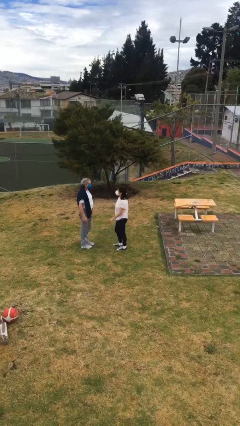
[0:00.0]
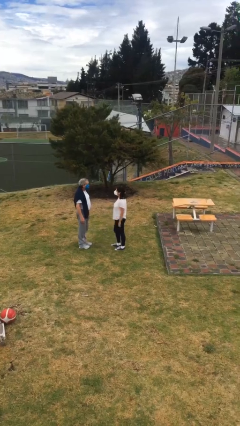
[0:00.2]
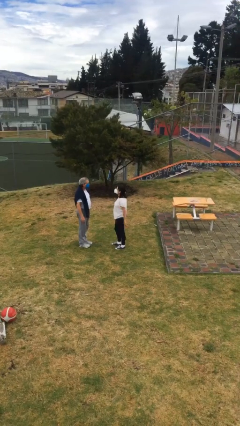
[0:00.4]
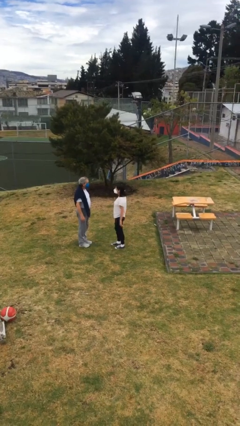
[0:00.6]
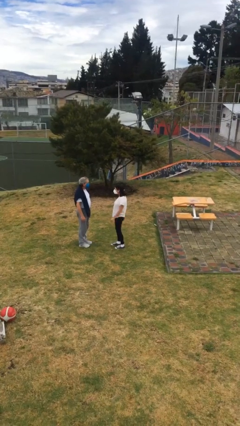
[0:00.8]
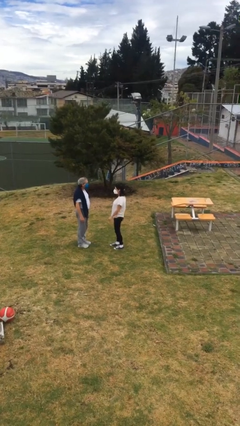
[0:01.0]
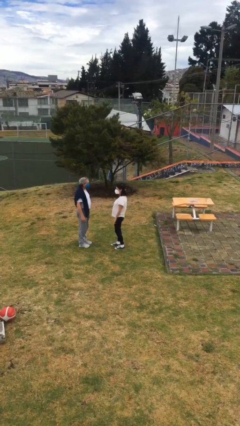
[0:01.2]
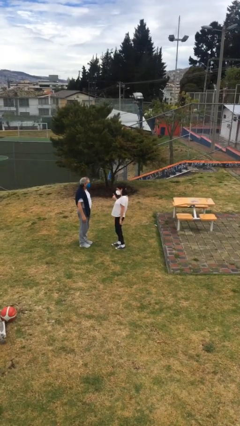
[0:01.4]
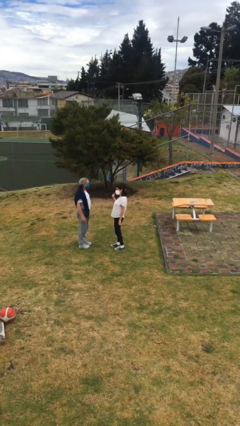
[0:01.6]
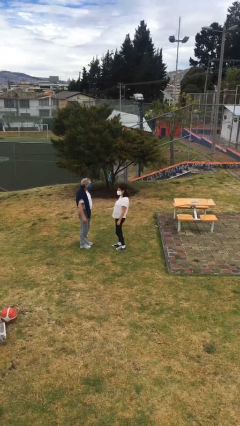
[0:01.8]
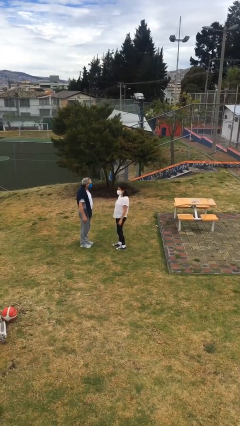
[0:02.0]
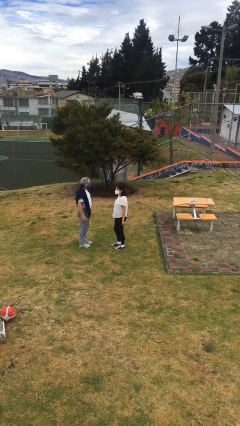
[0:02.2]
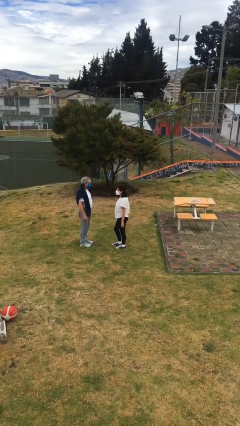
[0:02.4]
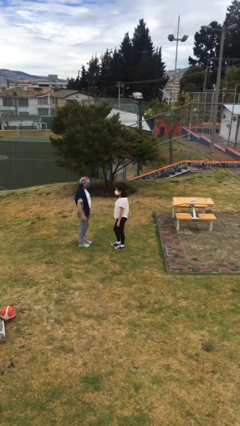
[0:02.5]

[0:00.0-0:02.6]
person talks to person

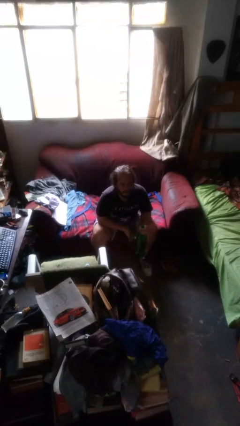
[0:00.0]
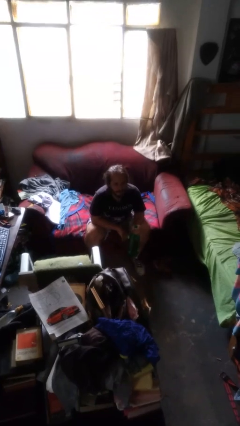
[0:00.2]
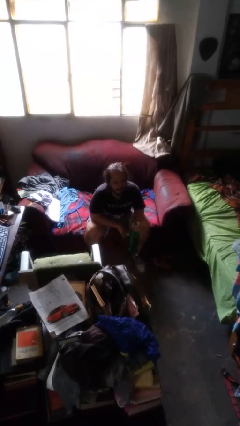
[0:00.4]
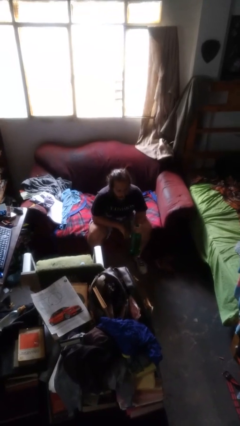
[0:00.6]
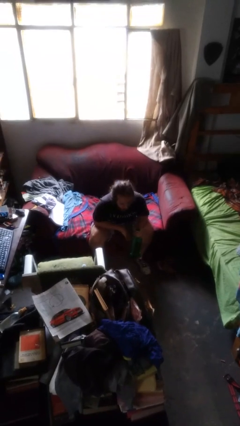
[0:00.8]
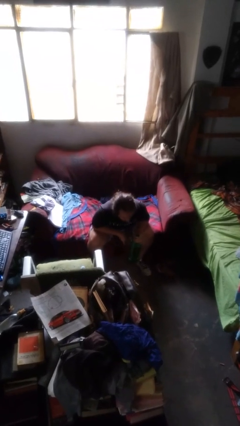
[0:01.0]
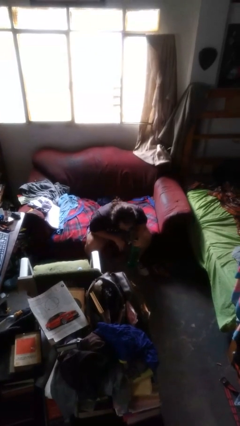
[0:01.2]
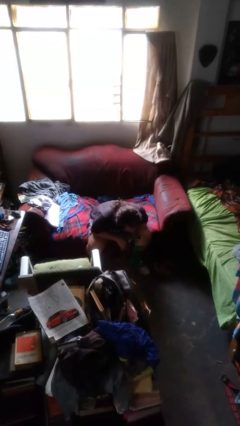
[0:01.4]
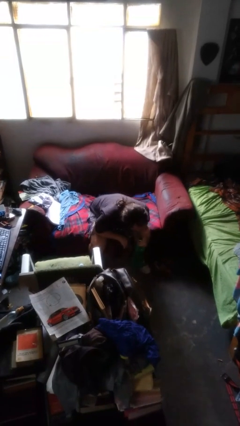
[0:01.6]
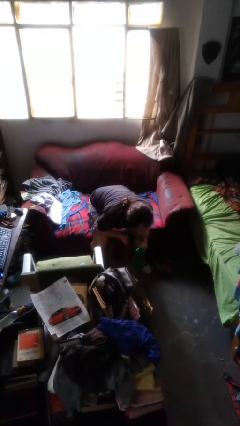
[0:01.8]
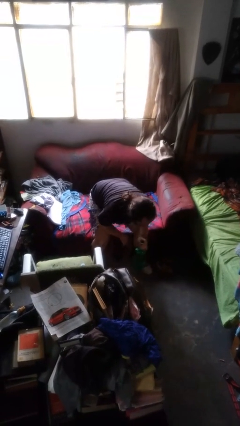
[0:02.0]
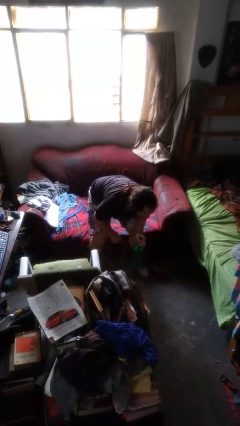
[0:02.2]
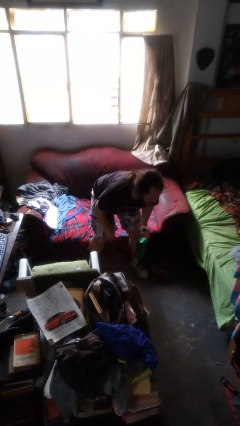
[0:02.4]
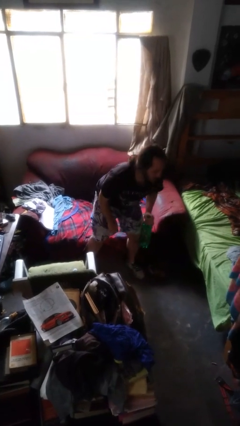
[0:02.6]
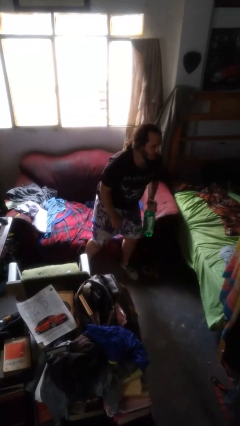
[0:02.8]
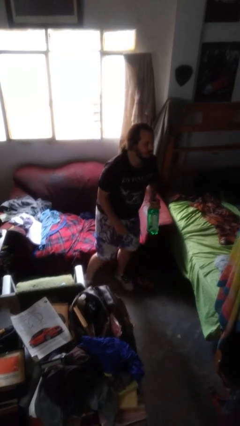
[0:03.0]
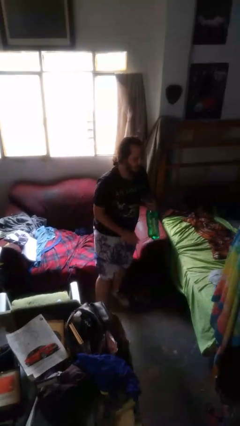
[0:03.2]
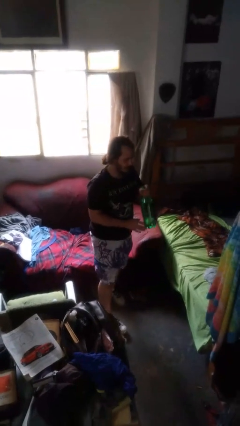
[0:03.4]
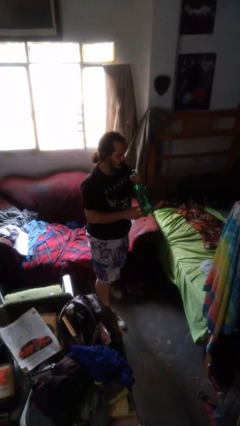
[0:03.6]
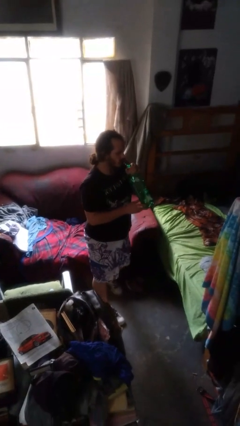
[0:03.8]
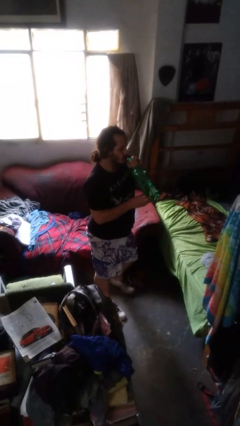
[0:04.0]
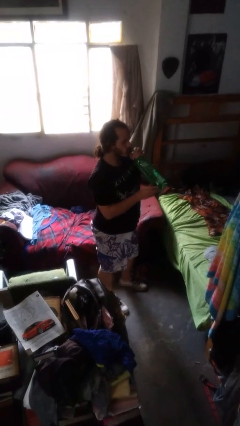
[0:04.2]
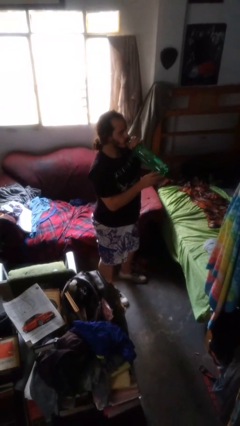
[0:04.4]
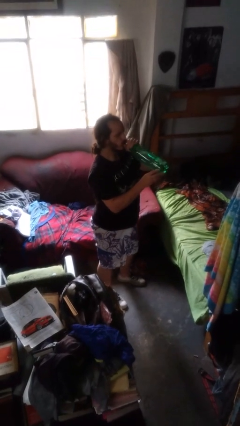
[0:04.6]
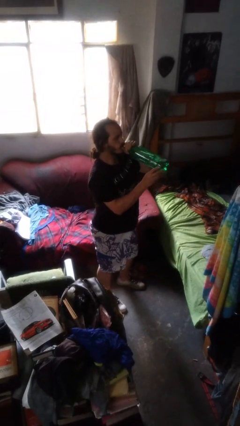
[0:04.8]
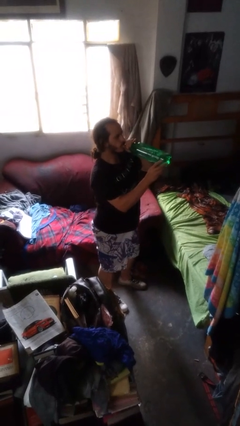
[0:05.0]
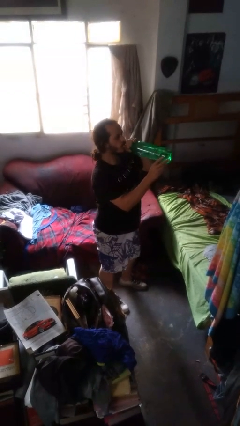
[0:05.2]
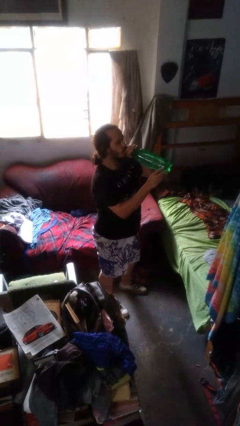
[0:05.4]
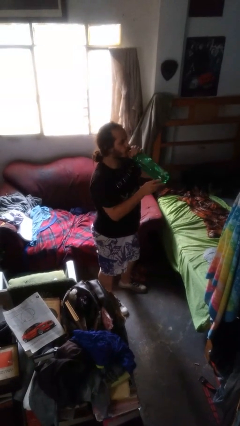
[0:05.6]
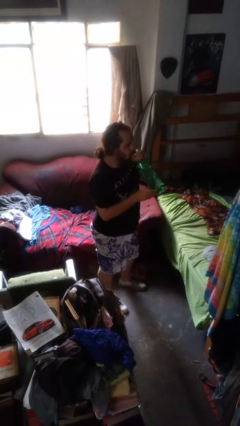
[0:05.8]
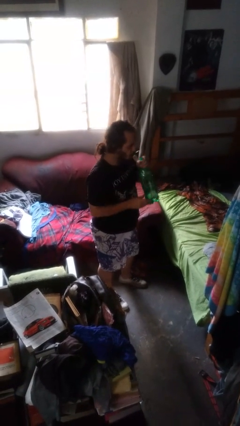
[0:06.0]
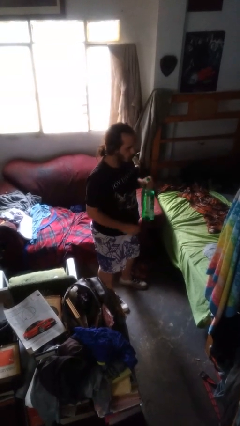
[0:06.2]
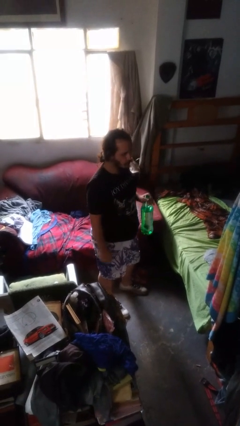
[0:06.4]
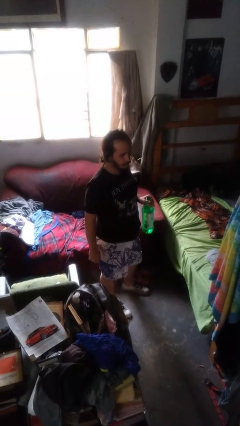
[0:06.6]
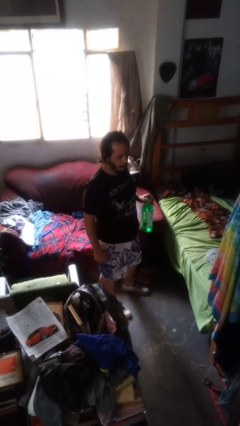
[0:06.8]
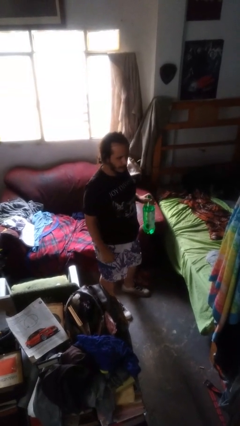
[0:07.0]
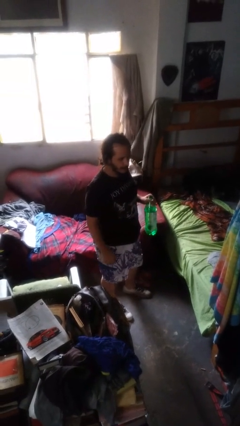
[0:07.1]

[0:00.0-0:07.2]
person drinks from bottle

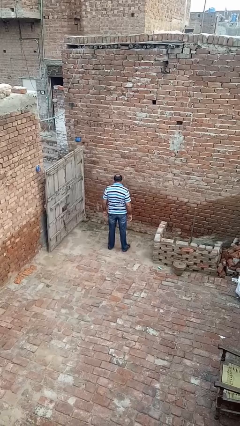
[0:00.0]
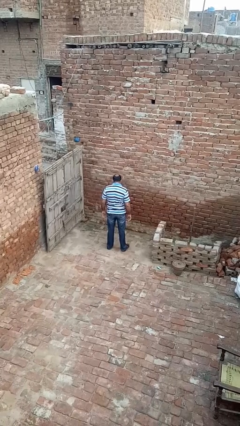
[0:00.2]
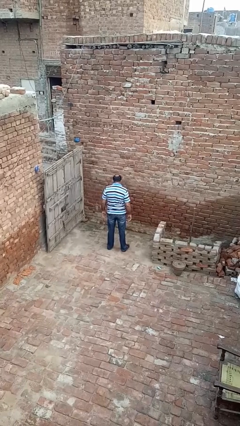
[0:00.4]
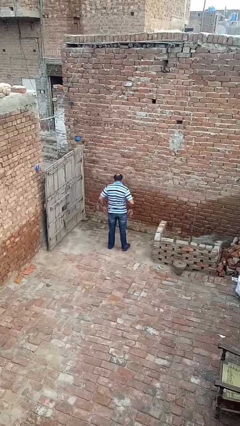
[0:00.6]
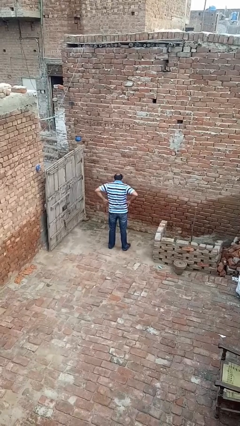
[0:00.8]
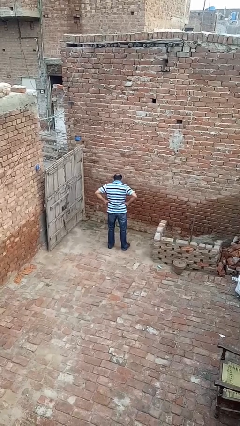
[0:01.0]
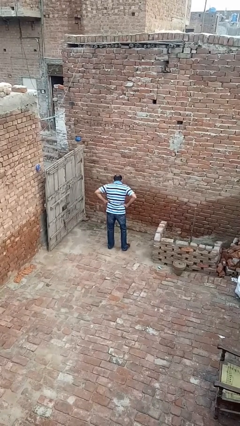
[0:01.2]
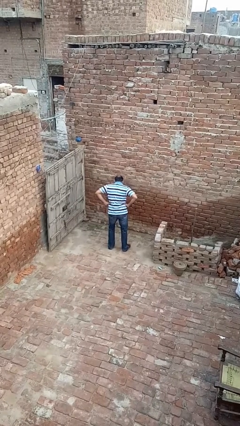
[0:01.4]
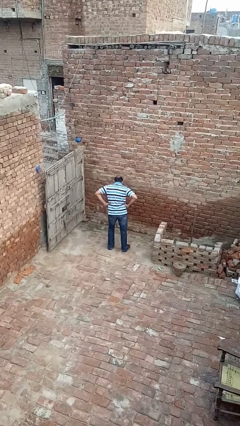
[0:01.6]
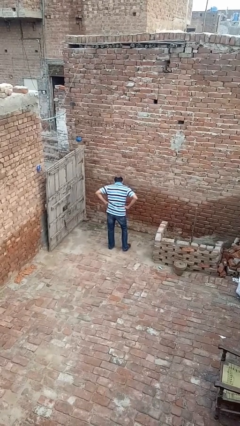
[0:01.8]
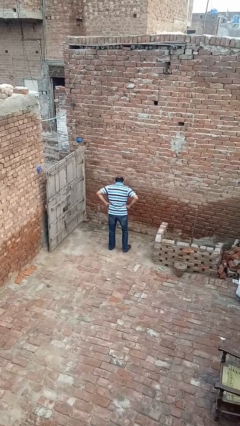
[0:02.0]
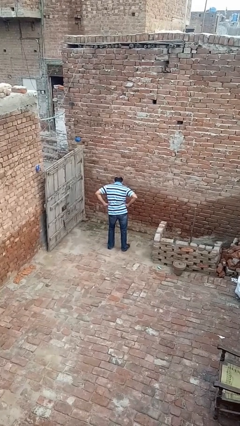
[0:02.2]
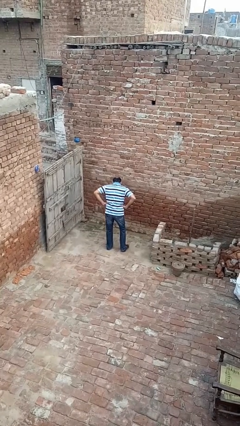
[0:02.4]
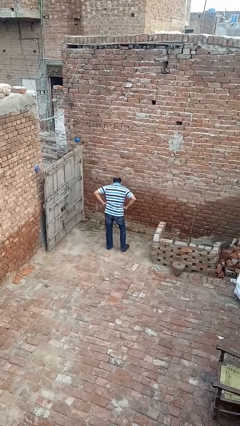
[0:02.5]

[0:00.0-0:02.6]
person wiggles hips

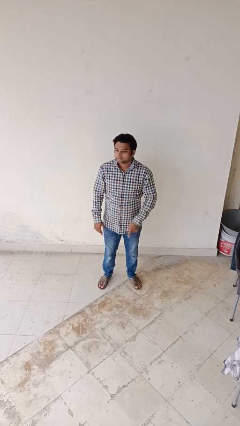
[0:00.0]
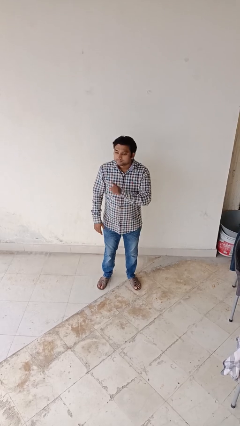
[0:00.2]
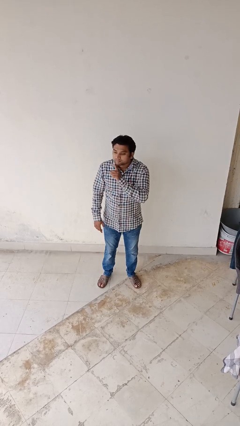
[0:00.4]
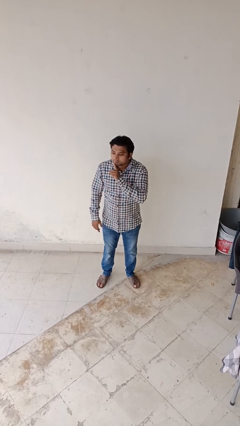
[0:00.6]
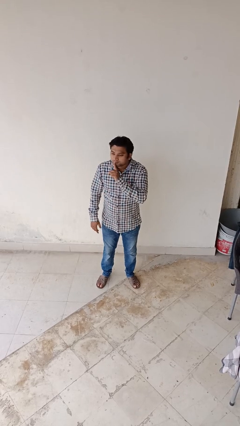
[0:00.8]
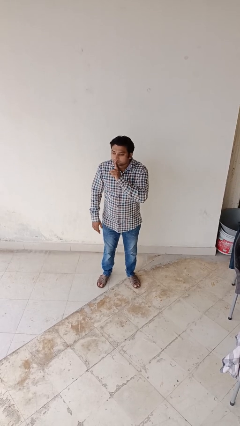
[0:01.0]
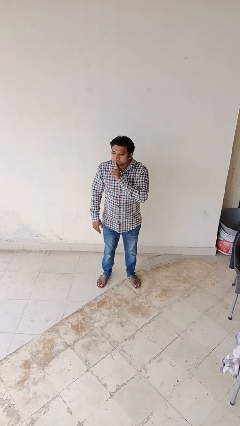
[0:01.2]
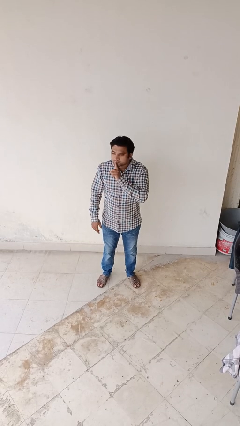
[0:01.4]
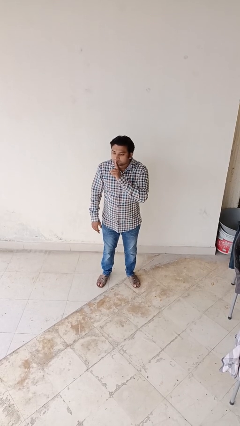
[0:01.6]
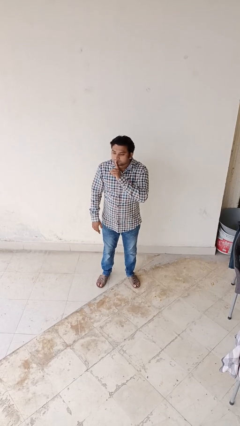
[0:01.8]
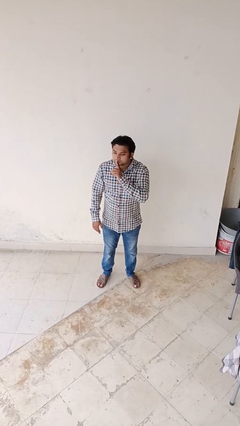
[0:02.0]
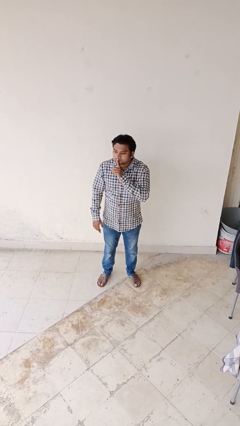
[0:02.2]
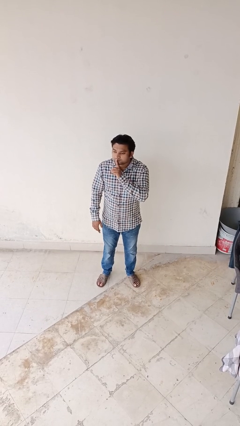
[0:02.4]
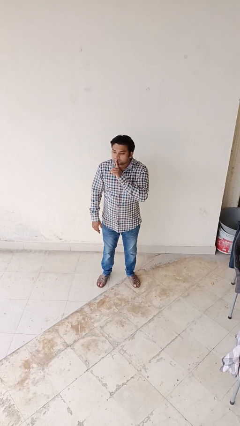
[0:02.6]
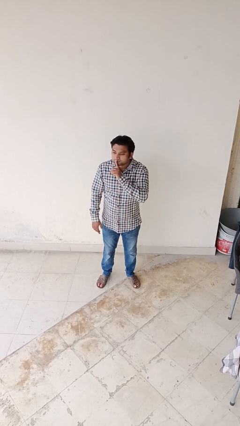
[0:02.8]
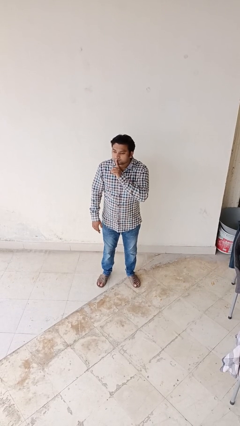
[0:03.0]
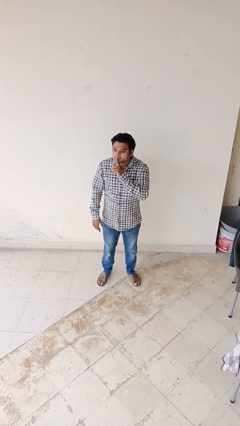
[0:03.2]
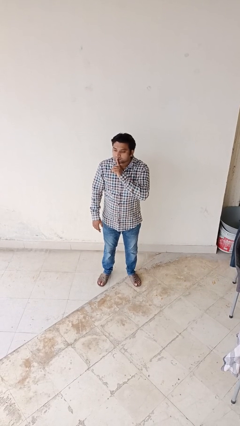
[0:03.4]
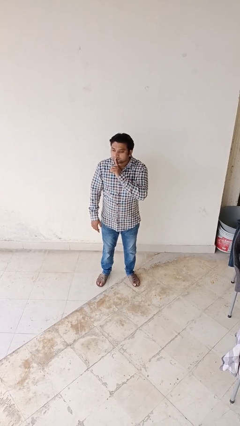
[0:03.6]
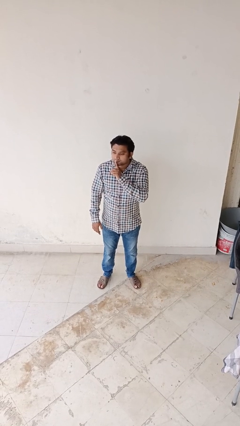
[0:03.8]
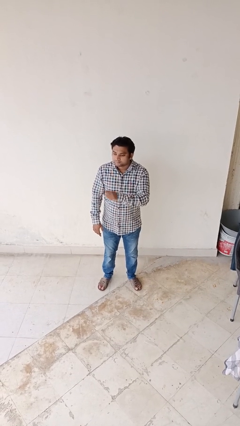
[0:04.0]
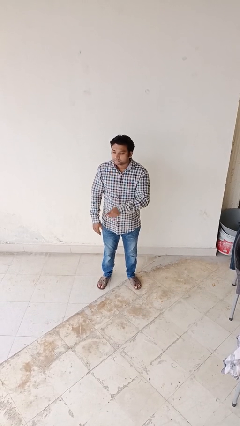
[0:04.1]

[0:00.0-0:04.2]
person gestures be quiet

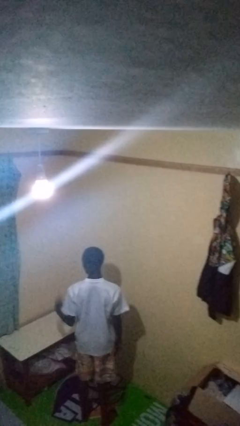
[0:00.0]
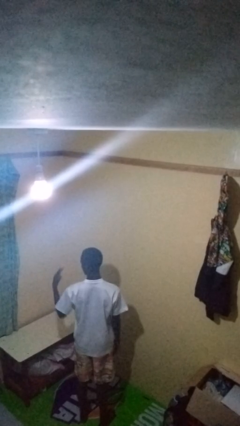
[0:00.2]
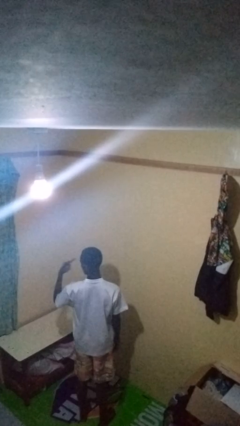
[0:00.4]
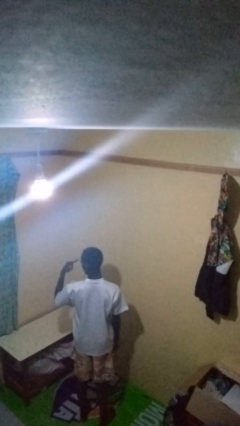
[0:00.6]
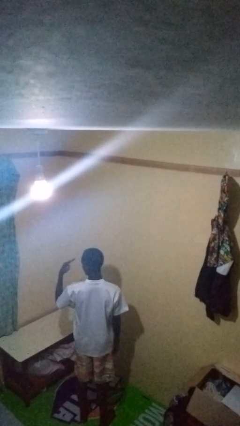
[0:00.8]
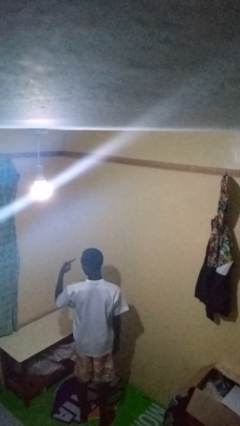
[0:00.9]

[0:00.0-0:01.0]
person gestures watch closely
